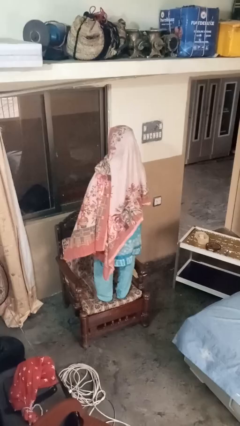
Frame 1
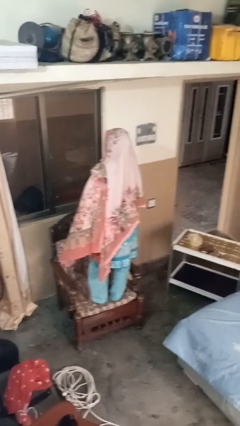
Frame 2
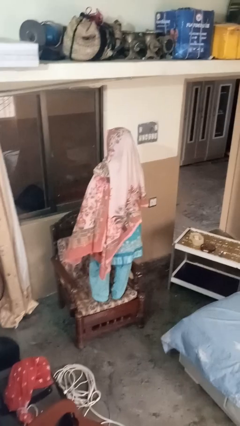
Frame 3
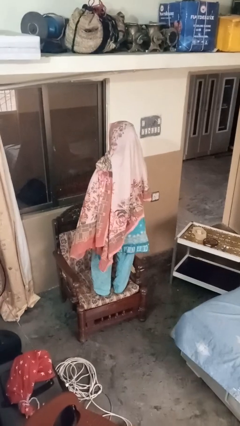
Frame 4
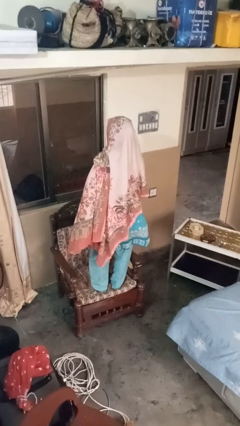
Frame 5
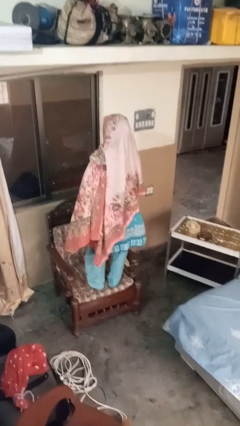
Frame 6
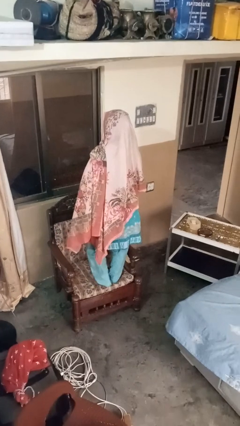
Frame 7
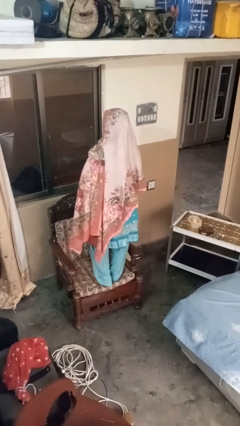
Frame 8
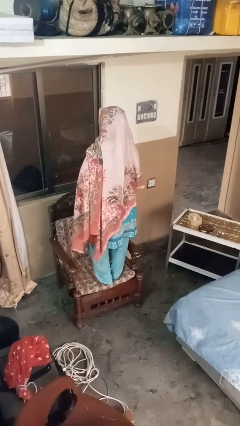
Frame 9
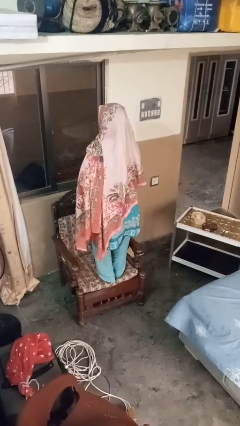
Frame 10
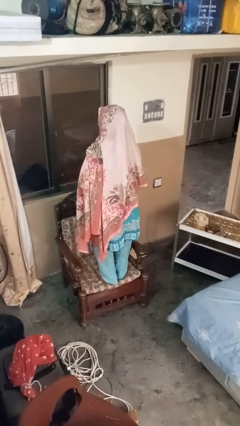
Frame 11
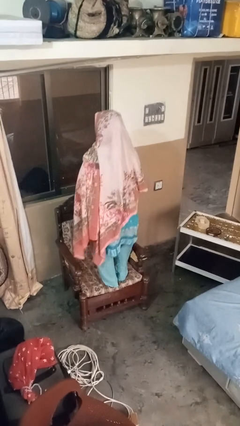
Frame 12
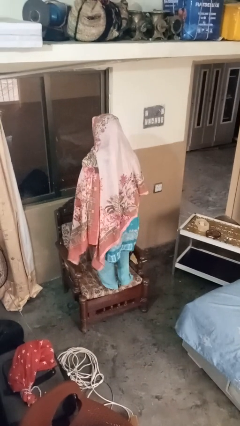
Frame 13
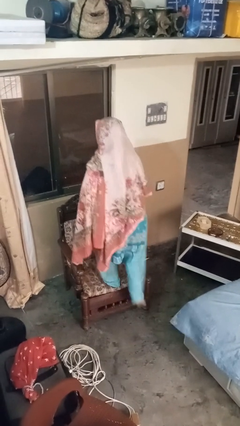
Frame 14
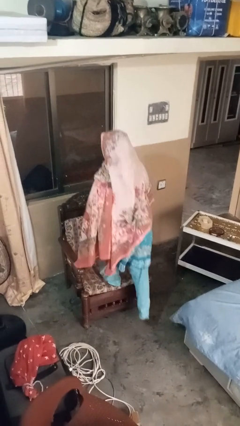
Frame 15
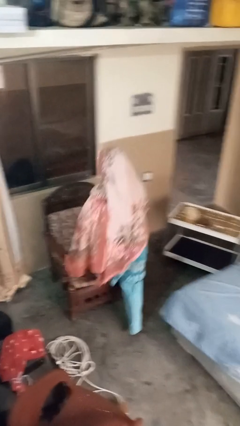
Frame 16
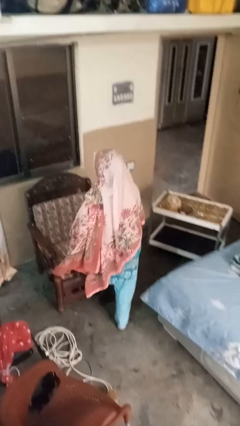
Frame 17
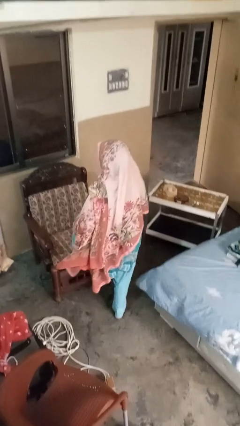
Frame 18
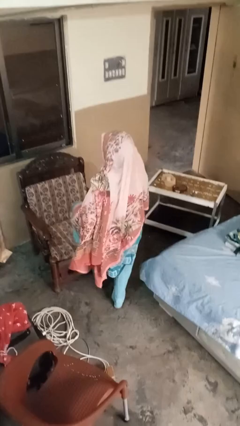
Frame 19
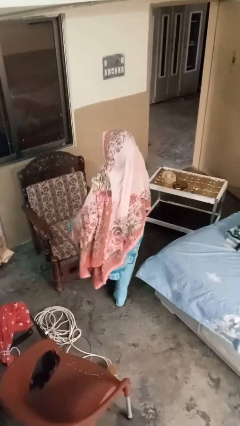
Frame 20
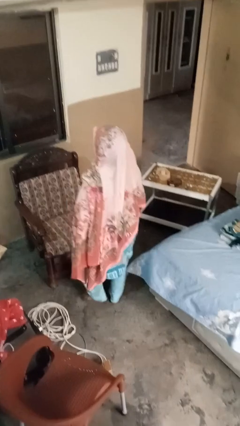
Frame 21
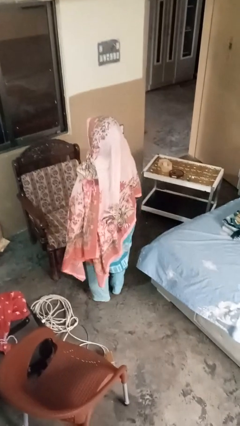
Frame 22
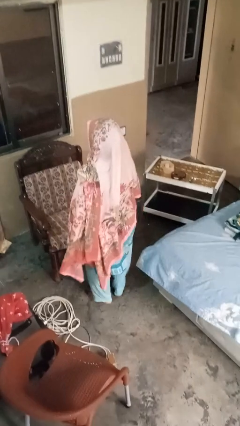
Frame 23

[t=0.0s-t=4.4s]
person climbs off couch

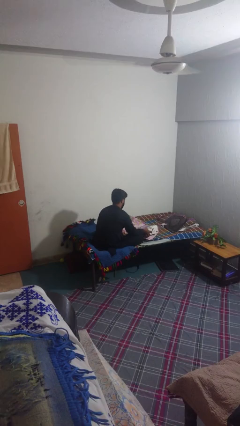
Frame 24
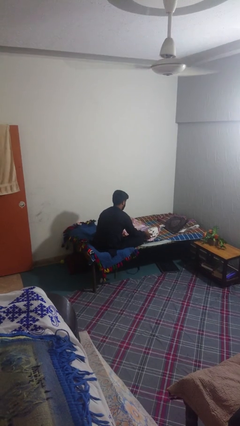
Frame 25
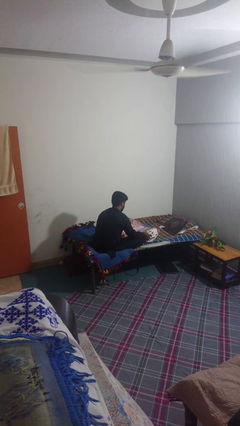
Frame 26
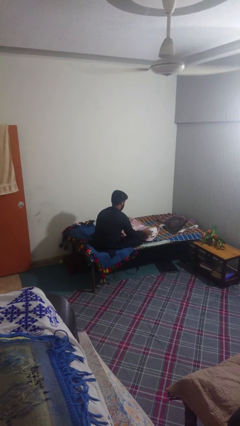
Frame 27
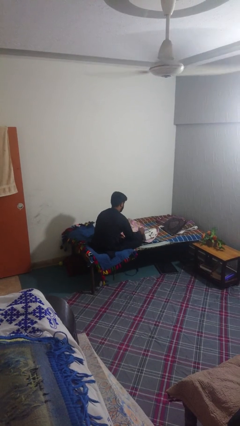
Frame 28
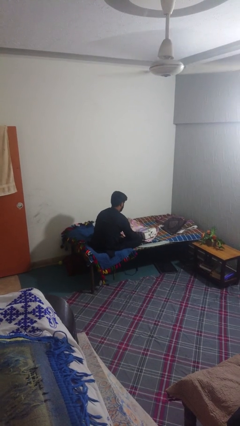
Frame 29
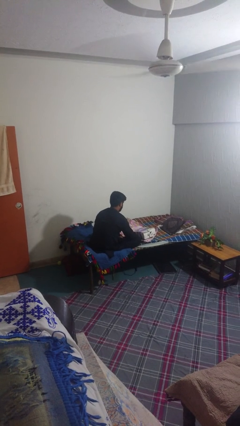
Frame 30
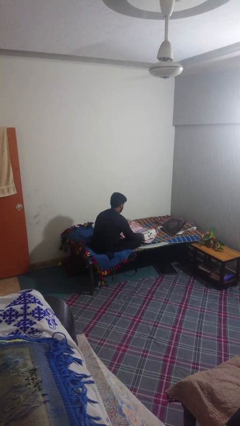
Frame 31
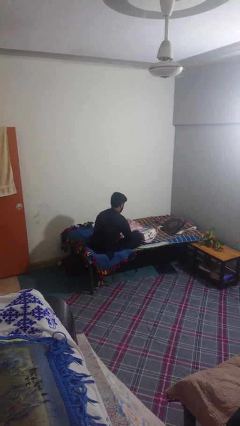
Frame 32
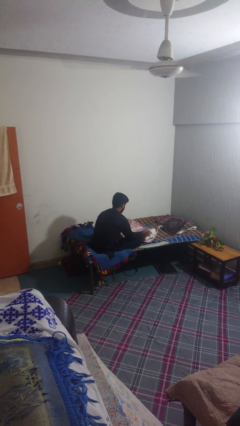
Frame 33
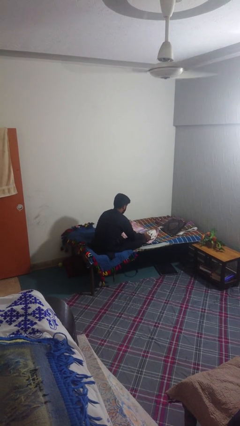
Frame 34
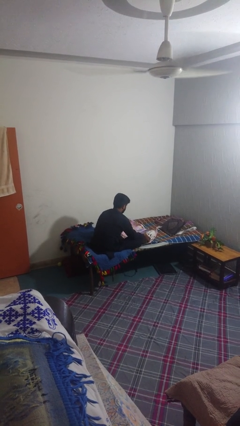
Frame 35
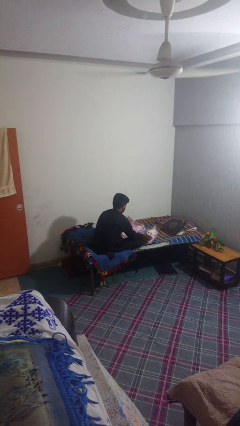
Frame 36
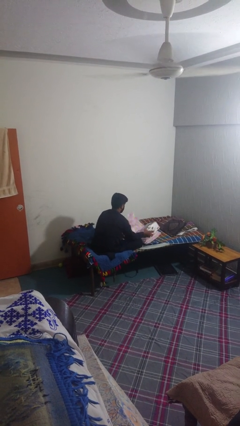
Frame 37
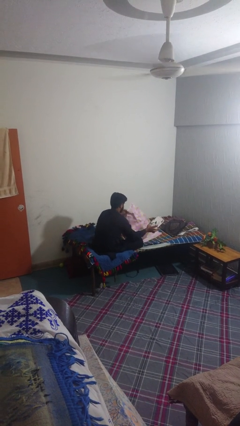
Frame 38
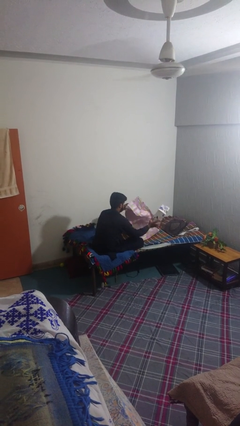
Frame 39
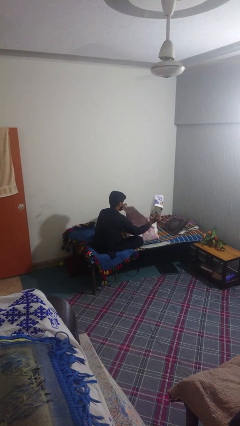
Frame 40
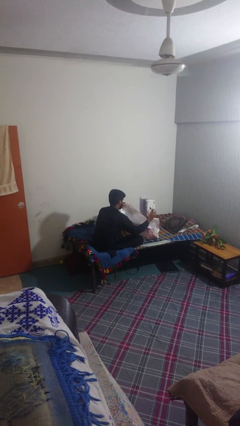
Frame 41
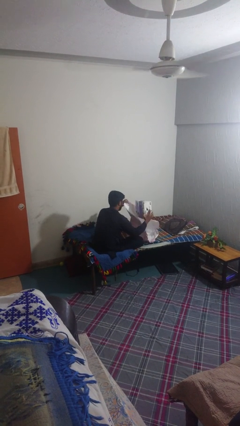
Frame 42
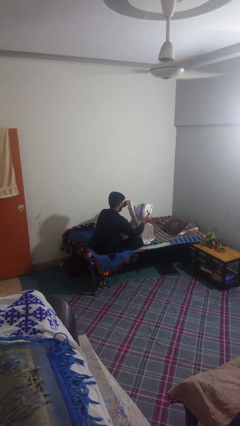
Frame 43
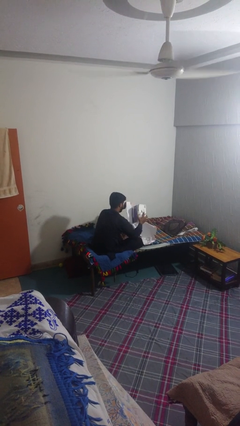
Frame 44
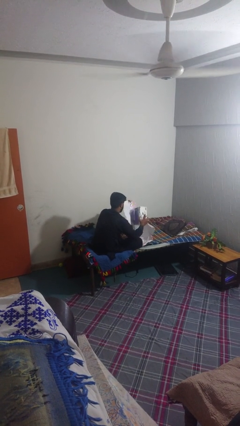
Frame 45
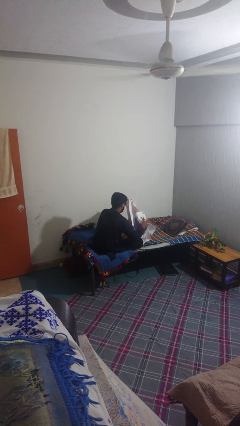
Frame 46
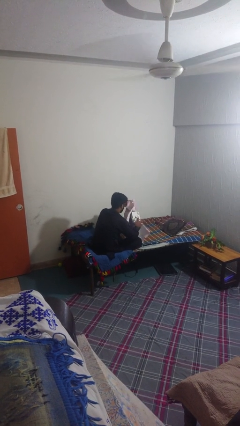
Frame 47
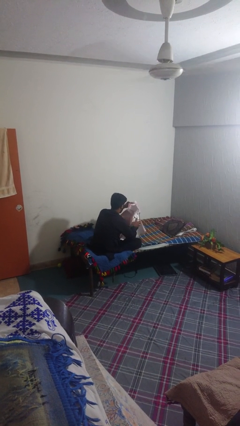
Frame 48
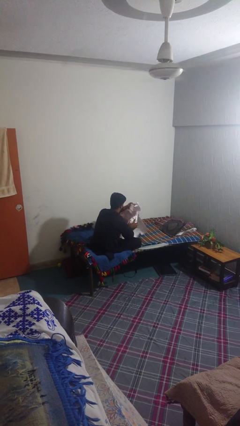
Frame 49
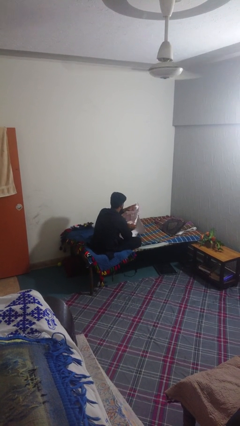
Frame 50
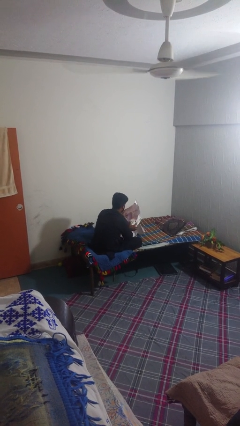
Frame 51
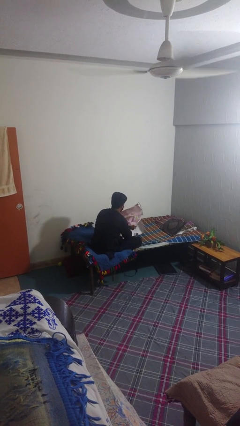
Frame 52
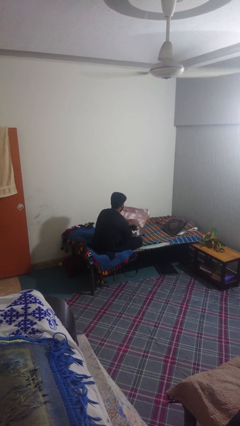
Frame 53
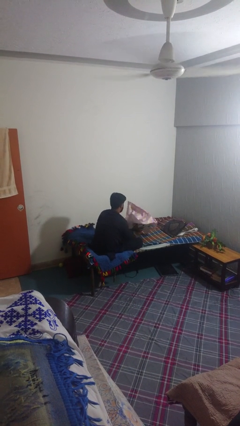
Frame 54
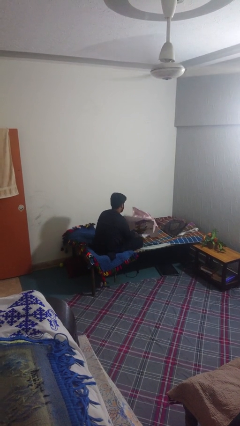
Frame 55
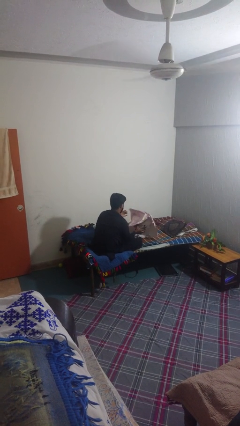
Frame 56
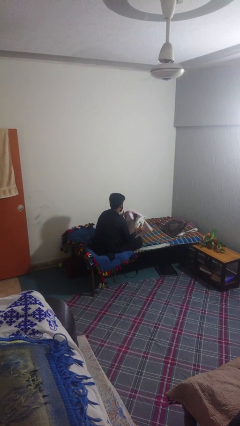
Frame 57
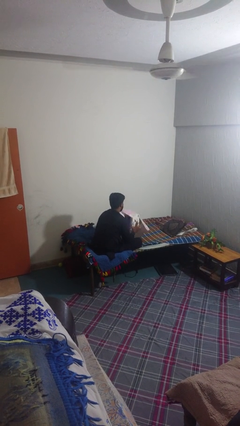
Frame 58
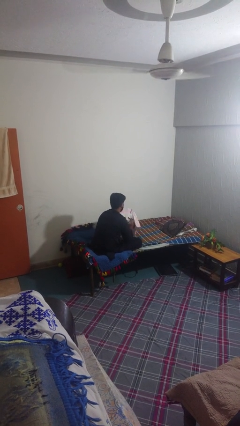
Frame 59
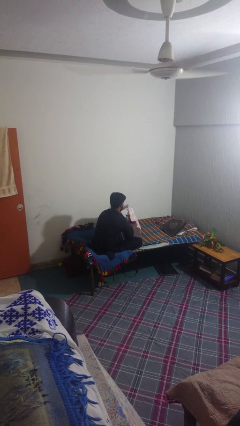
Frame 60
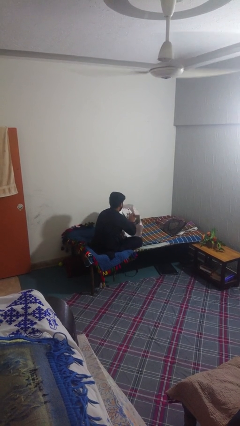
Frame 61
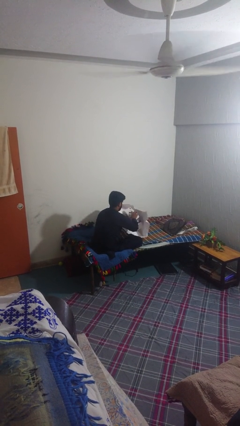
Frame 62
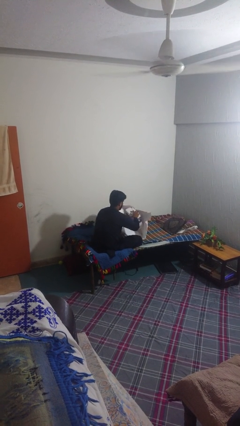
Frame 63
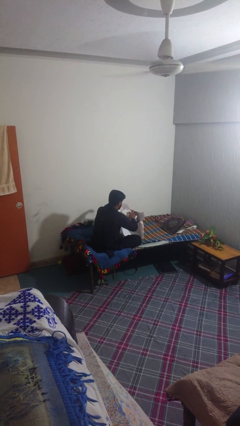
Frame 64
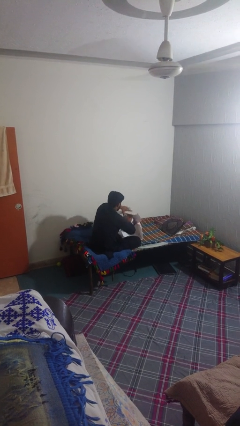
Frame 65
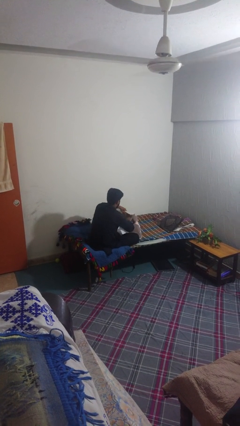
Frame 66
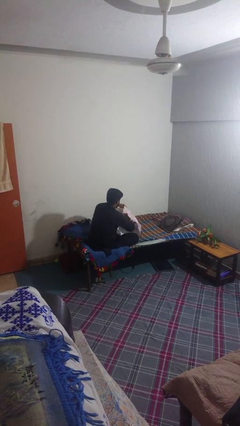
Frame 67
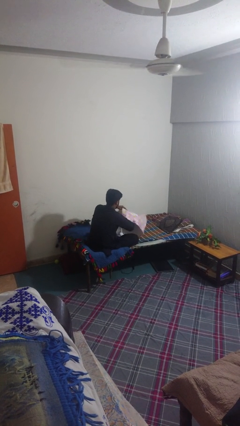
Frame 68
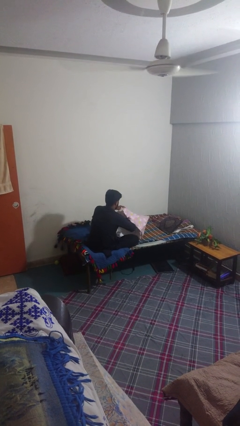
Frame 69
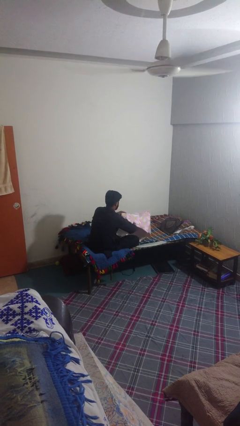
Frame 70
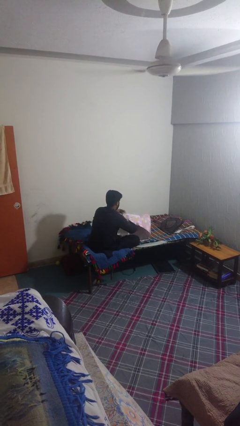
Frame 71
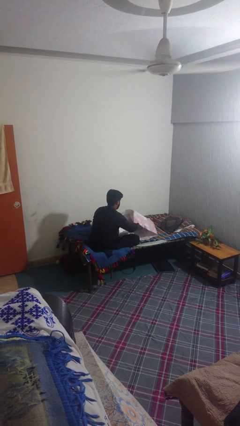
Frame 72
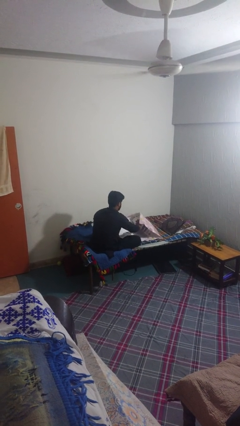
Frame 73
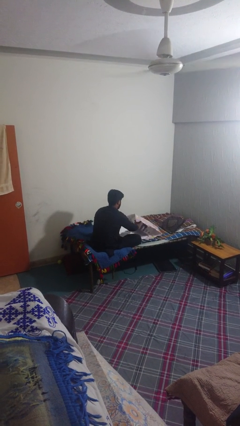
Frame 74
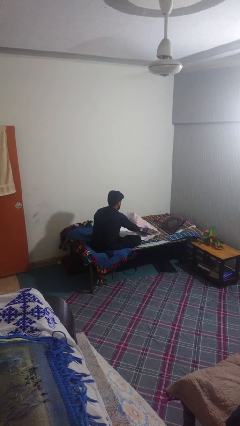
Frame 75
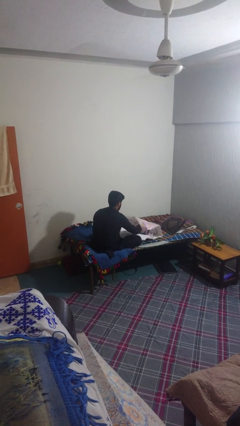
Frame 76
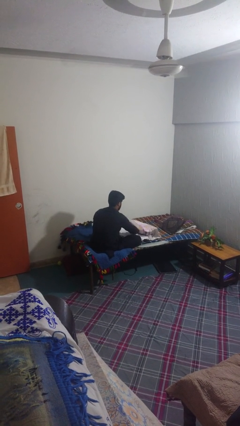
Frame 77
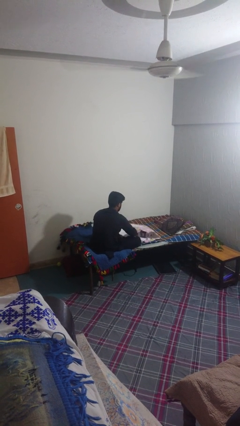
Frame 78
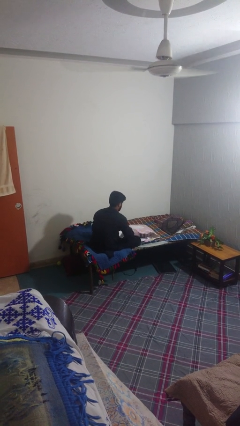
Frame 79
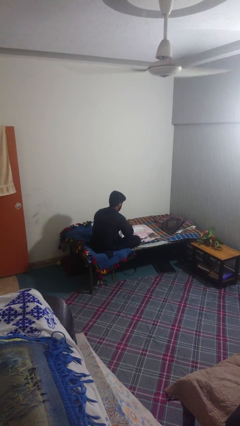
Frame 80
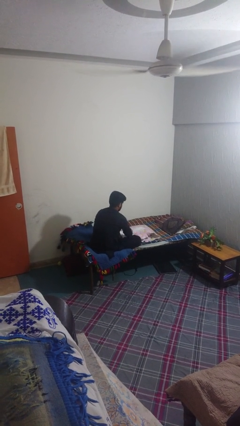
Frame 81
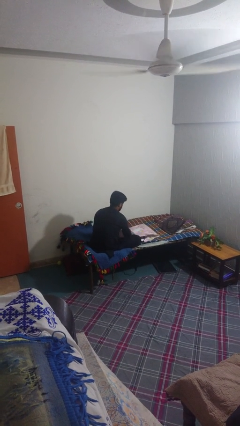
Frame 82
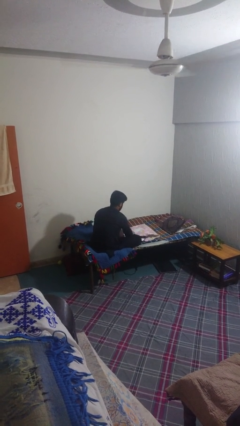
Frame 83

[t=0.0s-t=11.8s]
person wraps box

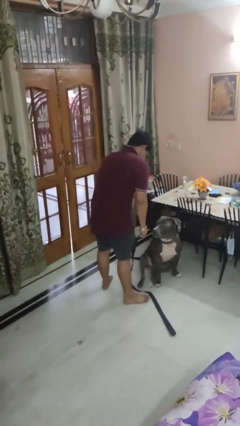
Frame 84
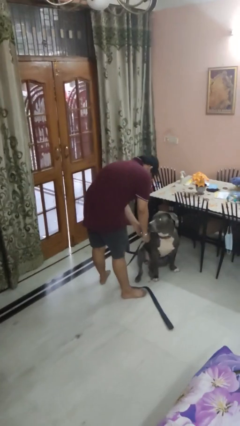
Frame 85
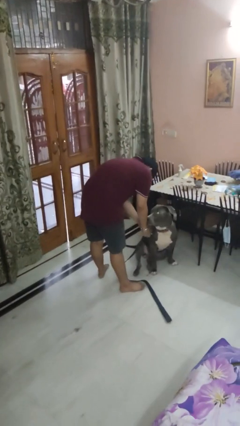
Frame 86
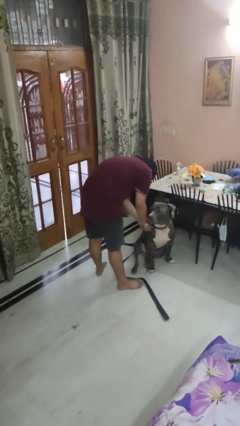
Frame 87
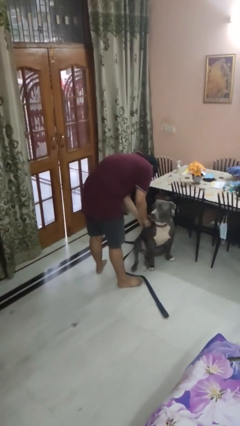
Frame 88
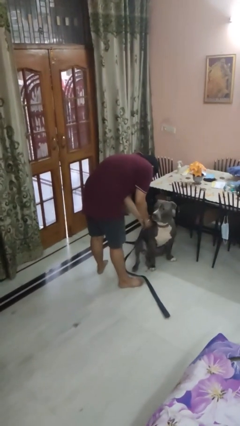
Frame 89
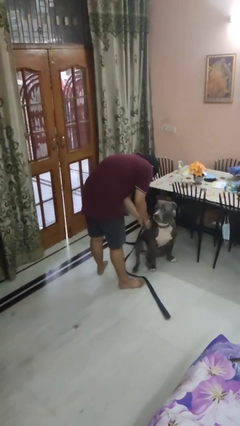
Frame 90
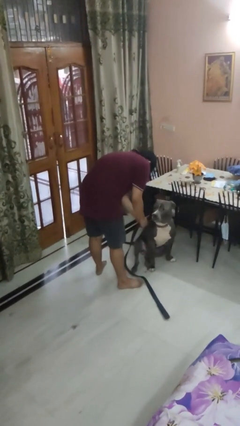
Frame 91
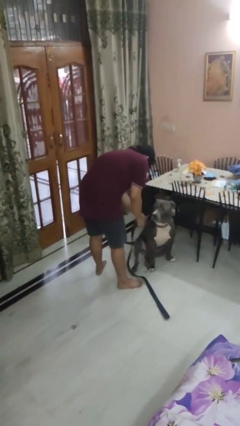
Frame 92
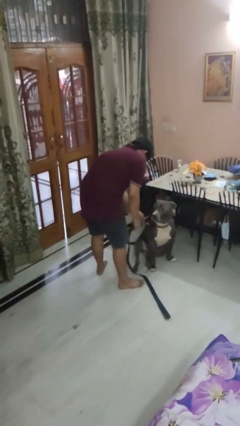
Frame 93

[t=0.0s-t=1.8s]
person attaches leash to dog
